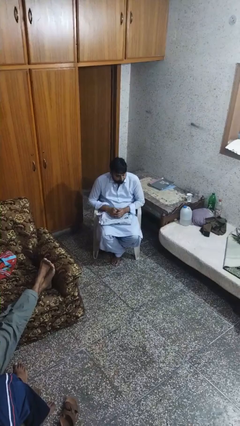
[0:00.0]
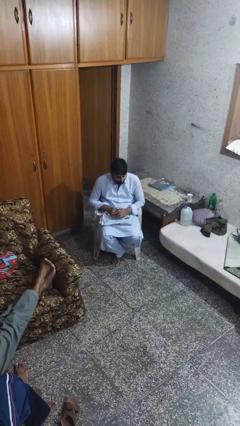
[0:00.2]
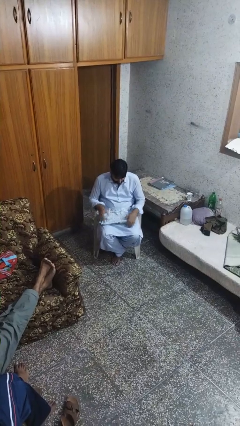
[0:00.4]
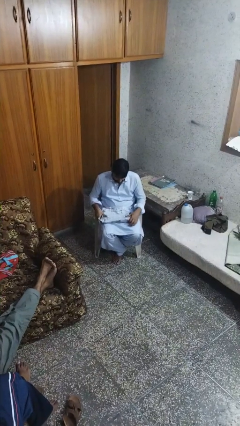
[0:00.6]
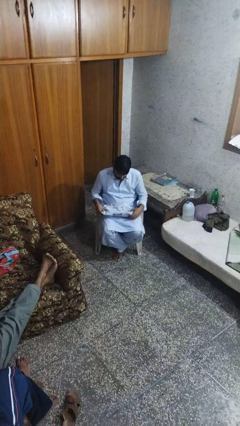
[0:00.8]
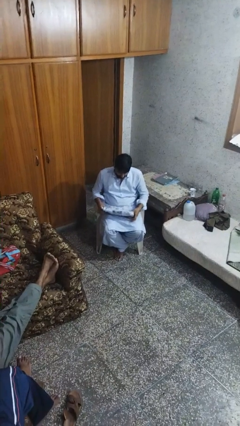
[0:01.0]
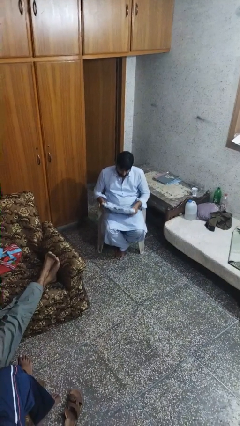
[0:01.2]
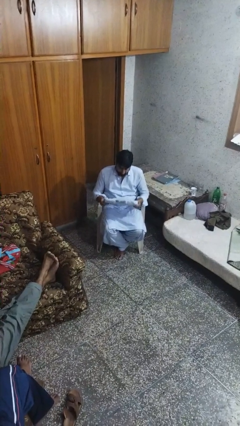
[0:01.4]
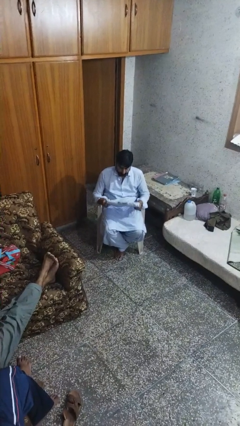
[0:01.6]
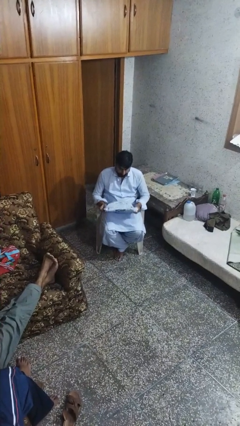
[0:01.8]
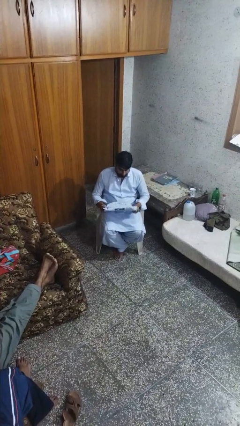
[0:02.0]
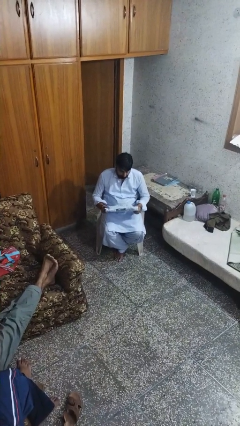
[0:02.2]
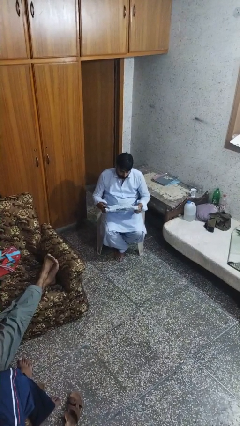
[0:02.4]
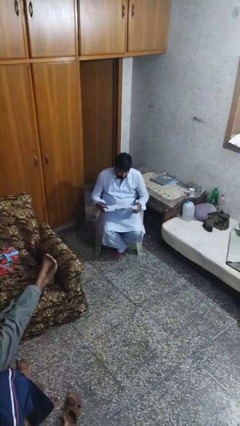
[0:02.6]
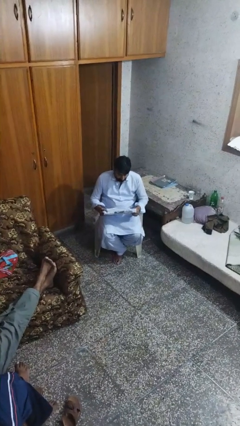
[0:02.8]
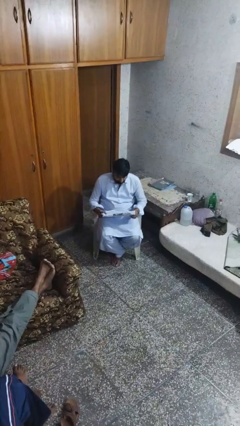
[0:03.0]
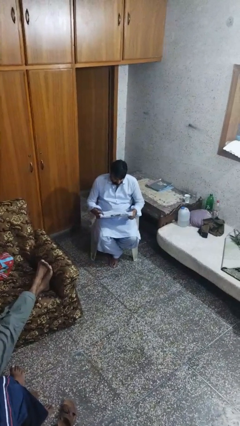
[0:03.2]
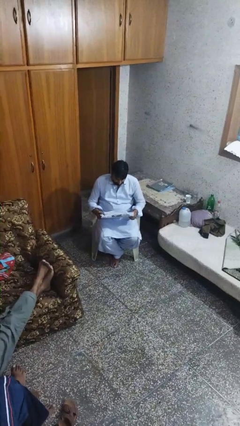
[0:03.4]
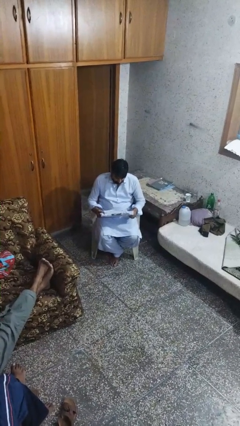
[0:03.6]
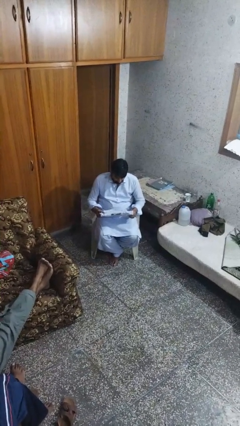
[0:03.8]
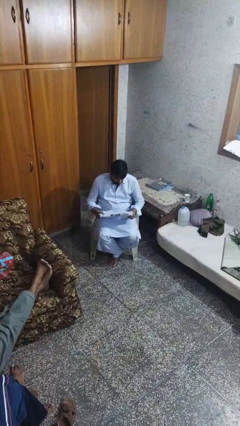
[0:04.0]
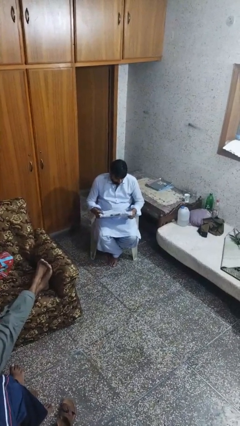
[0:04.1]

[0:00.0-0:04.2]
person reads newspaper

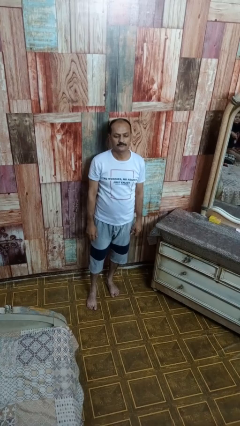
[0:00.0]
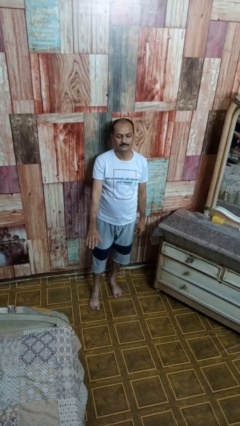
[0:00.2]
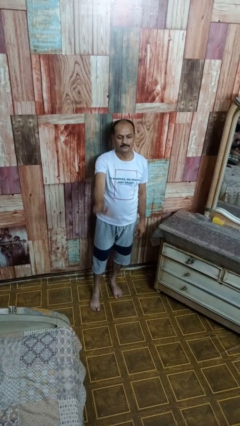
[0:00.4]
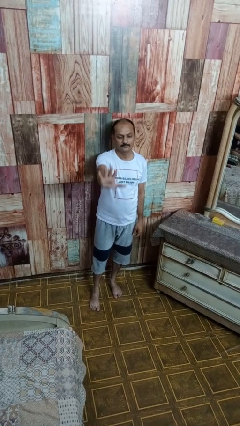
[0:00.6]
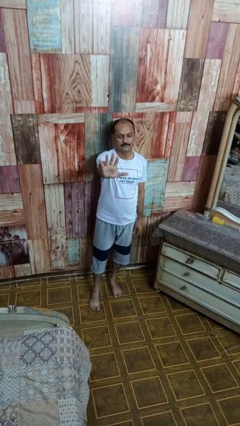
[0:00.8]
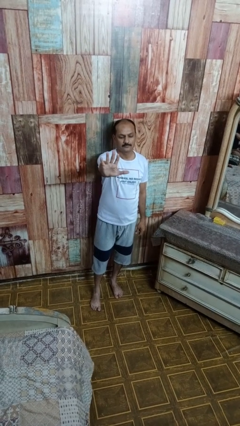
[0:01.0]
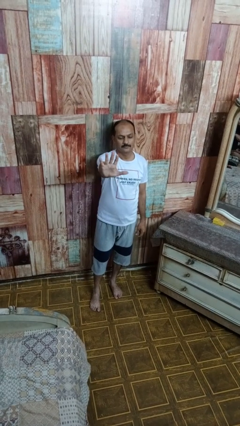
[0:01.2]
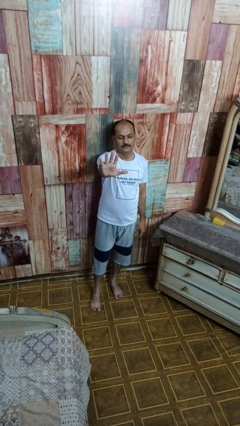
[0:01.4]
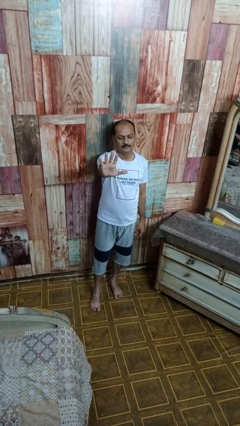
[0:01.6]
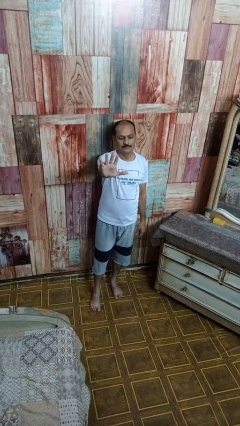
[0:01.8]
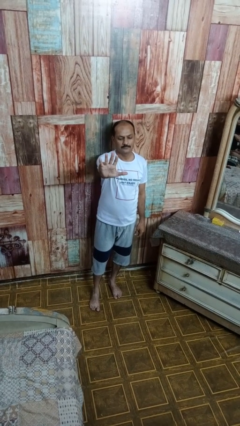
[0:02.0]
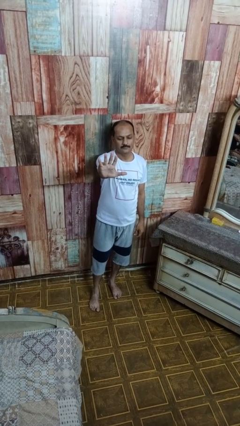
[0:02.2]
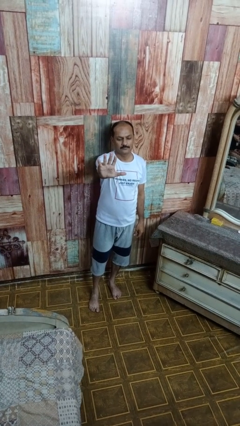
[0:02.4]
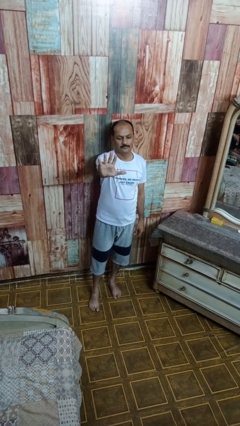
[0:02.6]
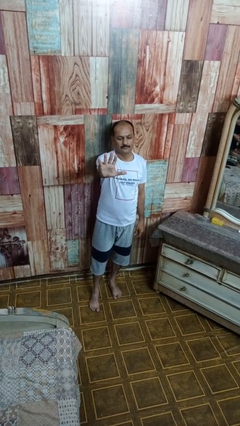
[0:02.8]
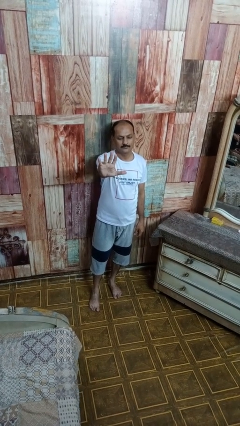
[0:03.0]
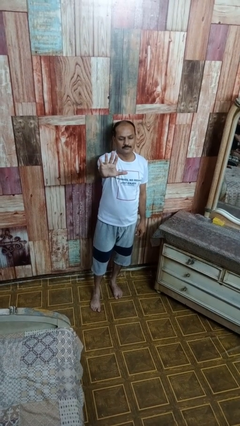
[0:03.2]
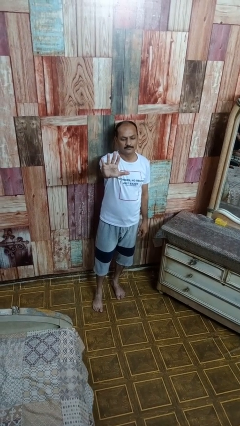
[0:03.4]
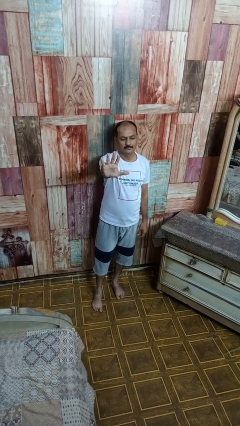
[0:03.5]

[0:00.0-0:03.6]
person gestures number five

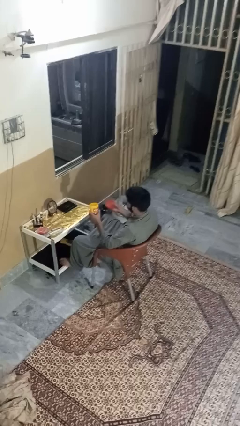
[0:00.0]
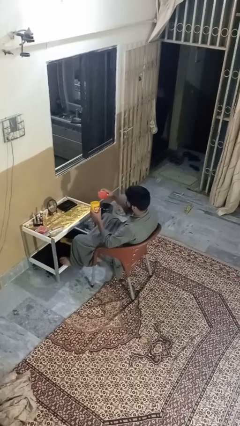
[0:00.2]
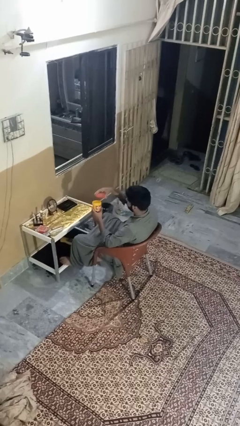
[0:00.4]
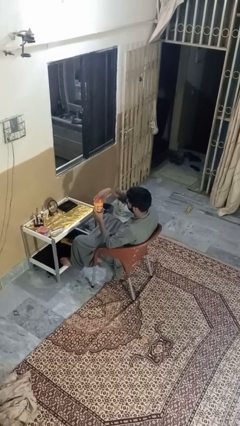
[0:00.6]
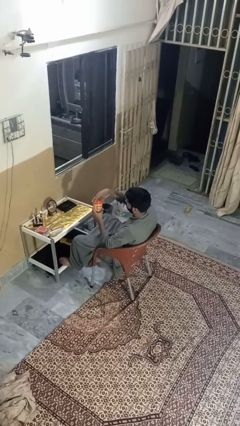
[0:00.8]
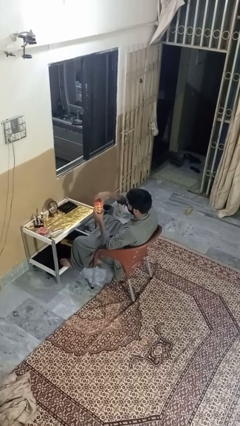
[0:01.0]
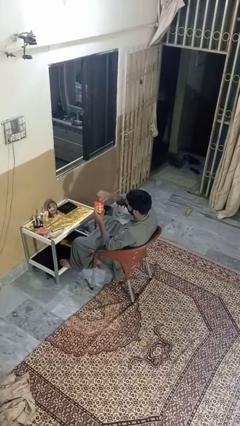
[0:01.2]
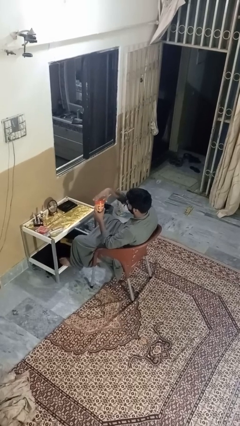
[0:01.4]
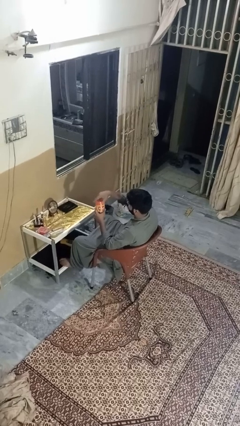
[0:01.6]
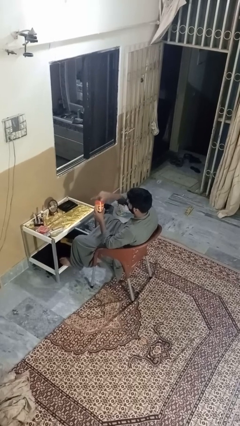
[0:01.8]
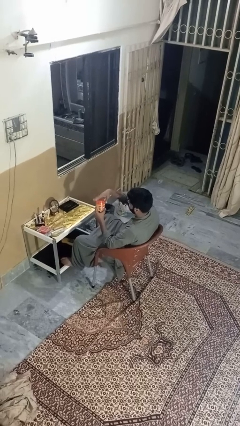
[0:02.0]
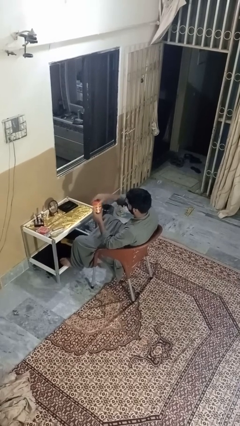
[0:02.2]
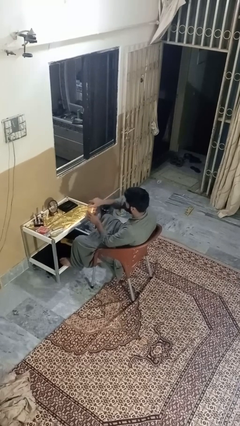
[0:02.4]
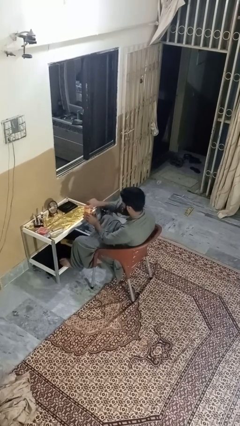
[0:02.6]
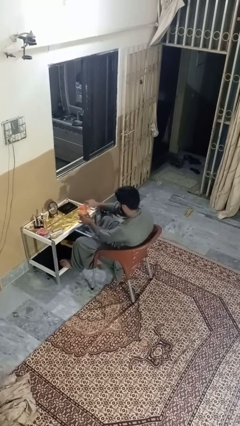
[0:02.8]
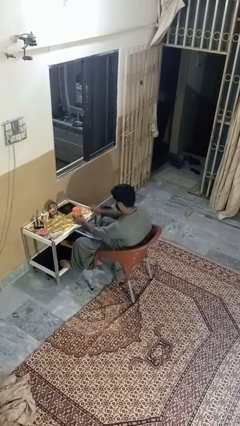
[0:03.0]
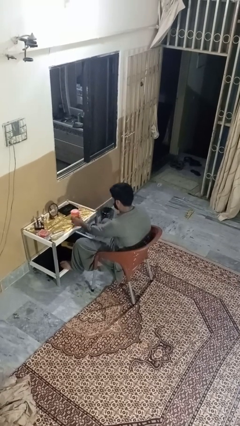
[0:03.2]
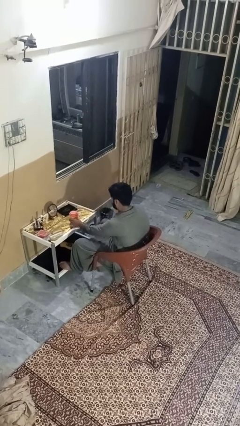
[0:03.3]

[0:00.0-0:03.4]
person closes jar

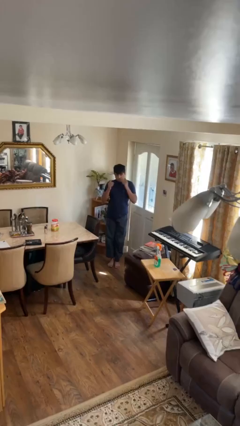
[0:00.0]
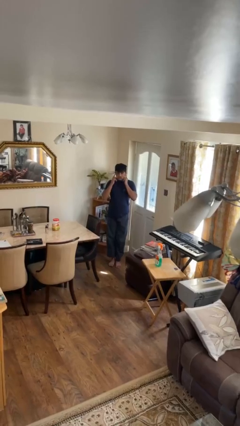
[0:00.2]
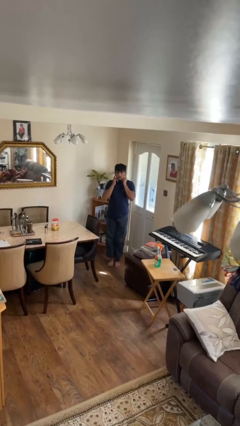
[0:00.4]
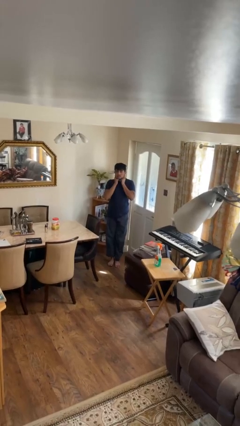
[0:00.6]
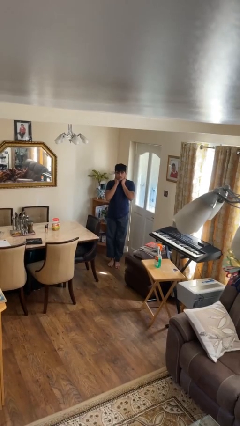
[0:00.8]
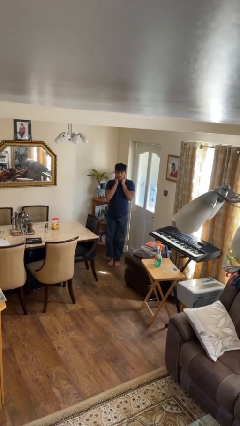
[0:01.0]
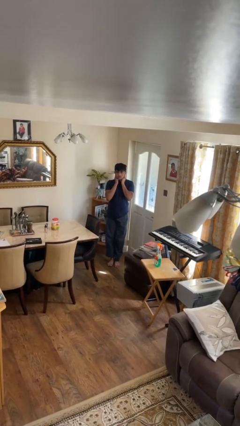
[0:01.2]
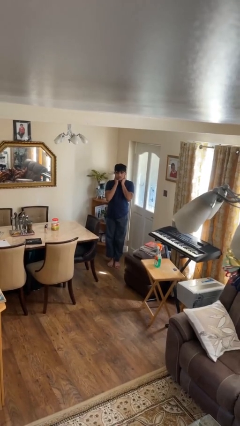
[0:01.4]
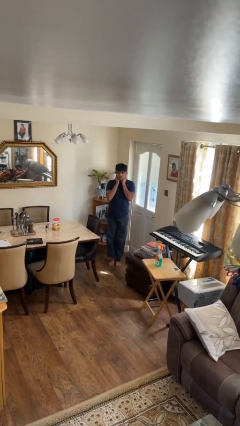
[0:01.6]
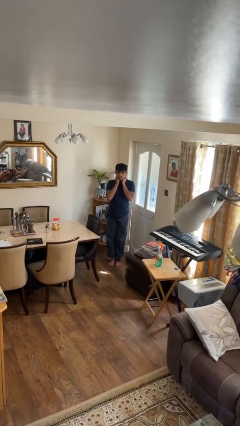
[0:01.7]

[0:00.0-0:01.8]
person puts fingers in ear

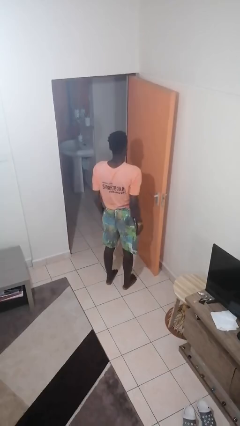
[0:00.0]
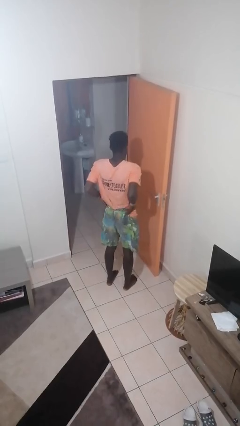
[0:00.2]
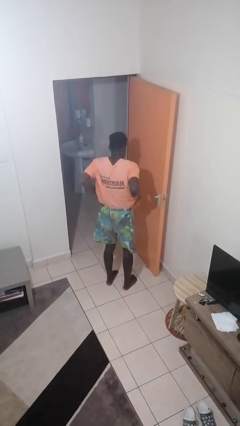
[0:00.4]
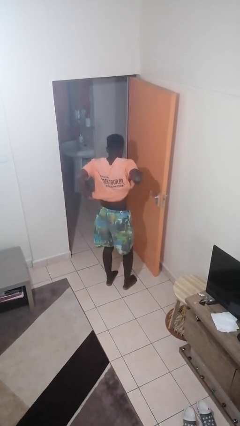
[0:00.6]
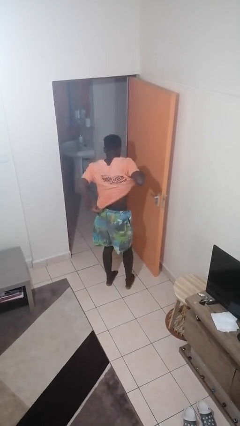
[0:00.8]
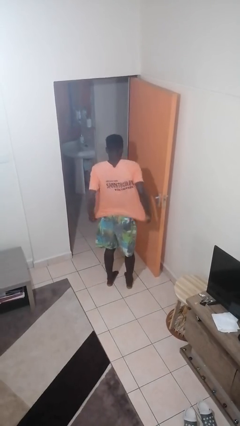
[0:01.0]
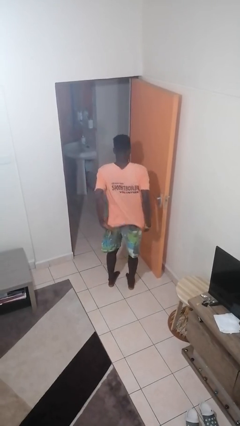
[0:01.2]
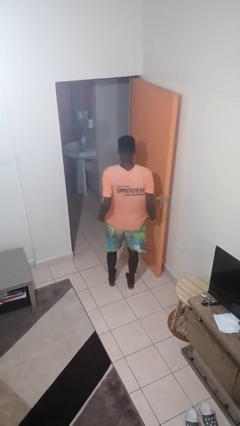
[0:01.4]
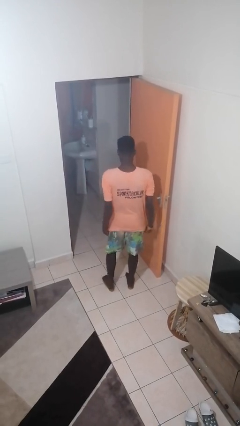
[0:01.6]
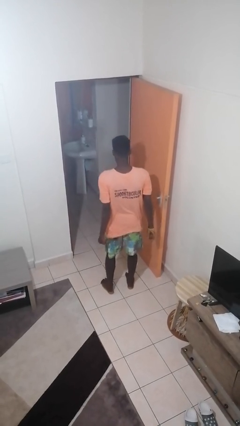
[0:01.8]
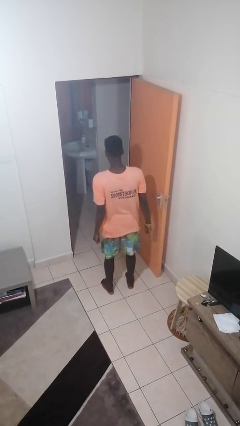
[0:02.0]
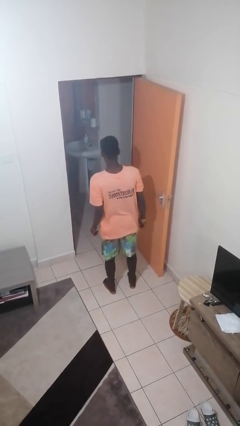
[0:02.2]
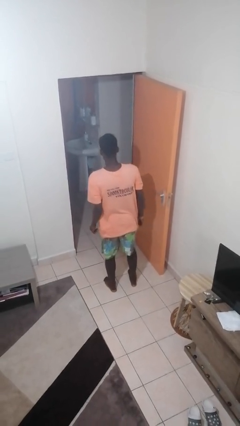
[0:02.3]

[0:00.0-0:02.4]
person untucks shirt

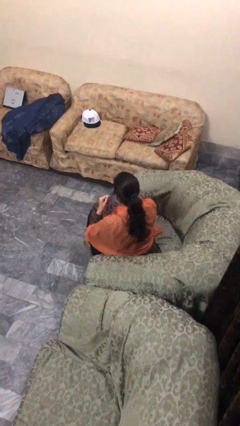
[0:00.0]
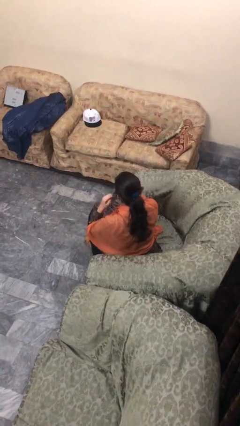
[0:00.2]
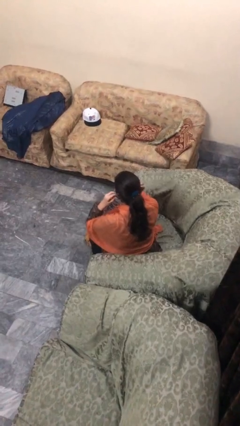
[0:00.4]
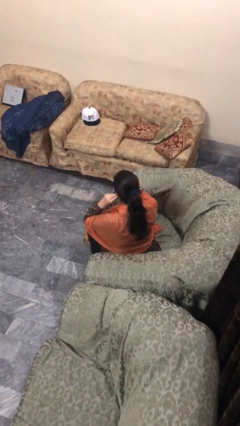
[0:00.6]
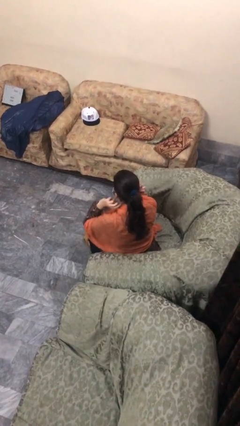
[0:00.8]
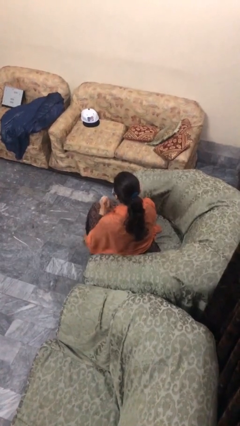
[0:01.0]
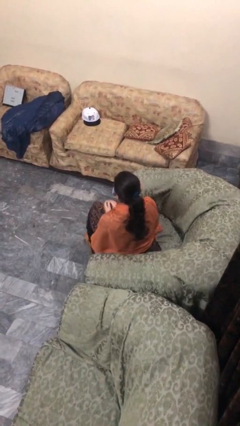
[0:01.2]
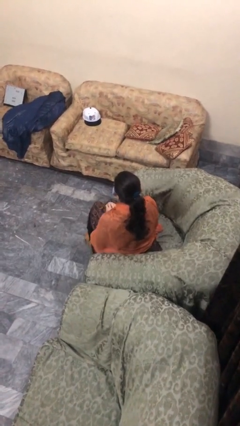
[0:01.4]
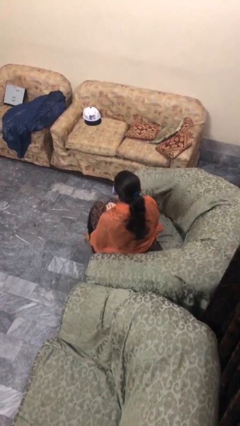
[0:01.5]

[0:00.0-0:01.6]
person puts on facemask

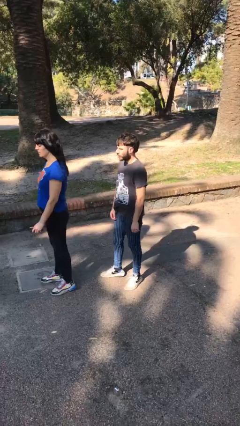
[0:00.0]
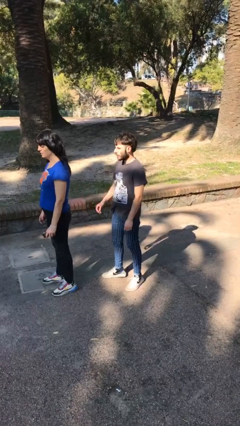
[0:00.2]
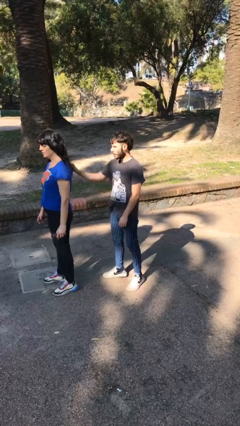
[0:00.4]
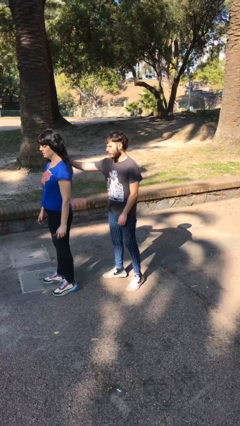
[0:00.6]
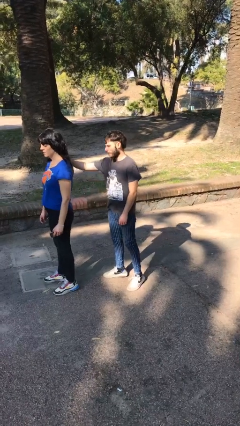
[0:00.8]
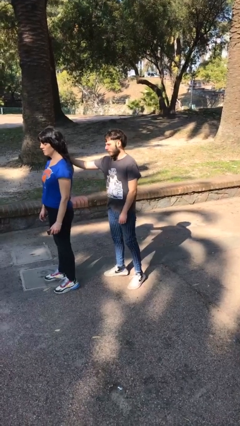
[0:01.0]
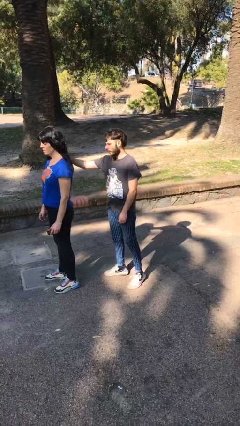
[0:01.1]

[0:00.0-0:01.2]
person grabs person by shoulder
